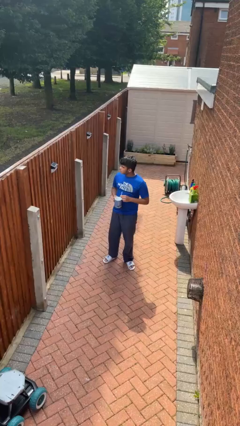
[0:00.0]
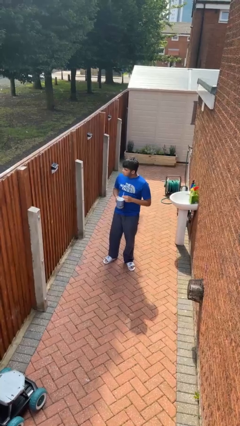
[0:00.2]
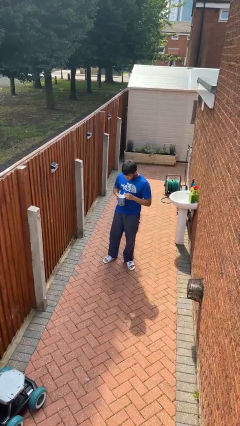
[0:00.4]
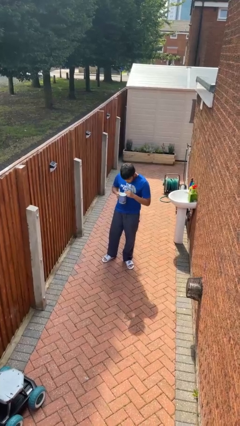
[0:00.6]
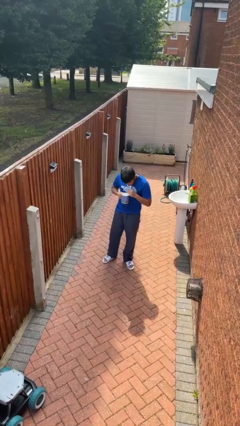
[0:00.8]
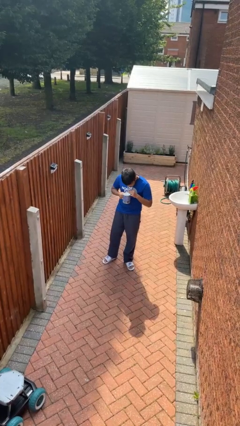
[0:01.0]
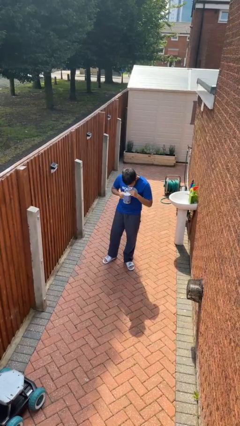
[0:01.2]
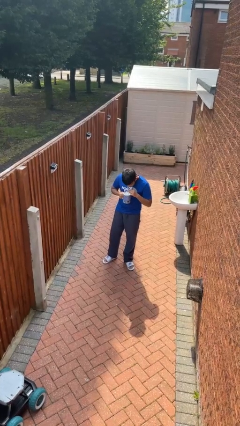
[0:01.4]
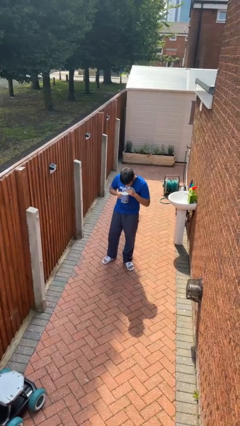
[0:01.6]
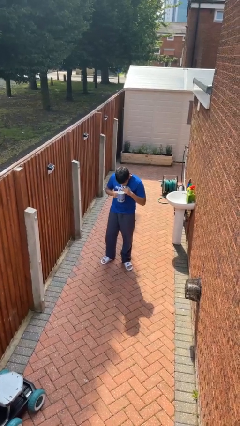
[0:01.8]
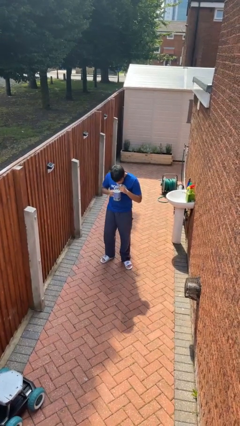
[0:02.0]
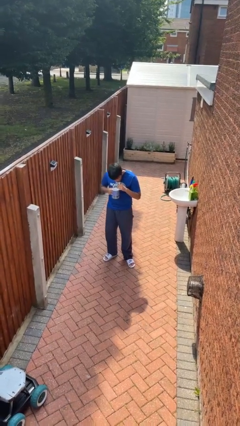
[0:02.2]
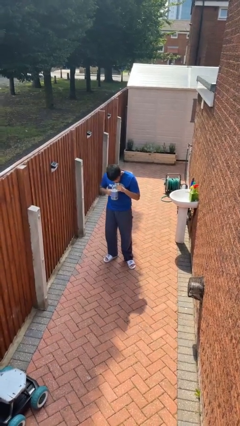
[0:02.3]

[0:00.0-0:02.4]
person drinks from straw

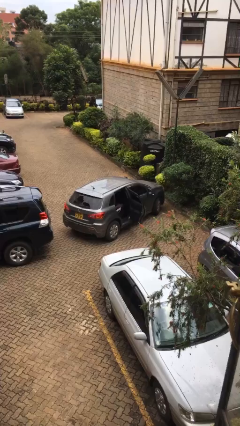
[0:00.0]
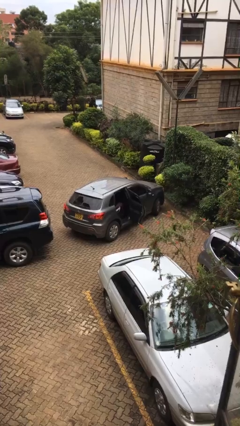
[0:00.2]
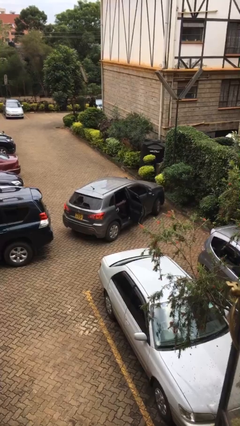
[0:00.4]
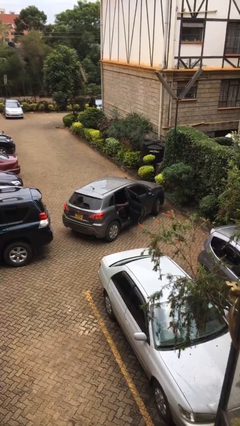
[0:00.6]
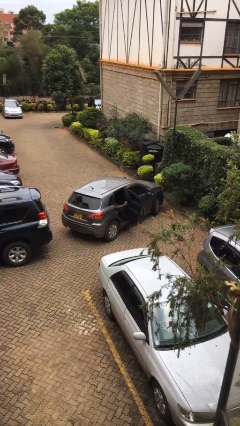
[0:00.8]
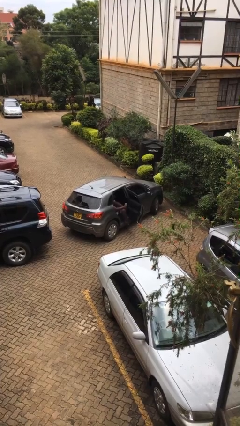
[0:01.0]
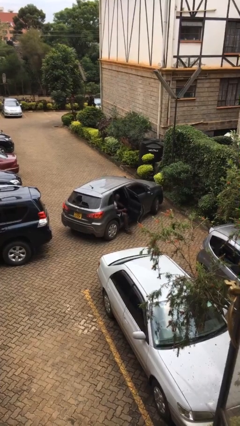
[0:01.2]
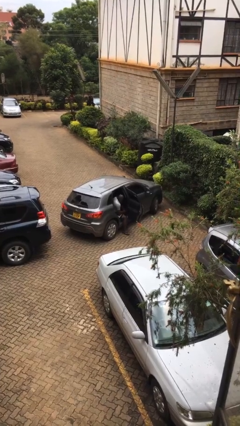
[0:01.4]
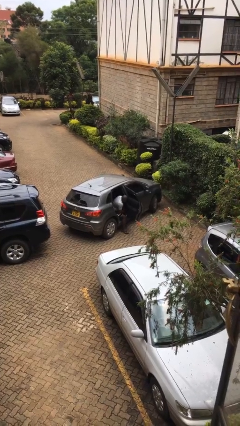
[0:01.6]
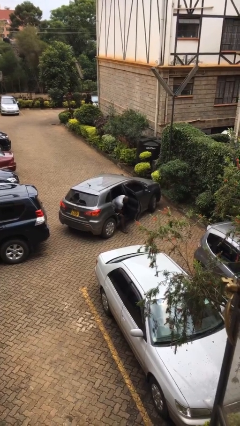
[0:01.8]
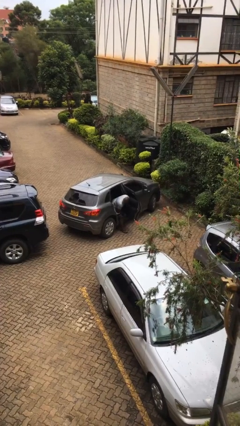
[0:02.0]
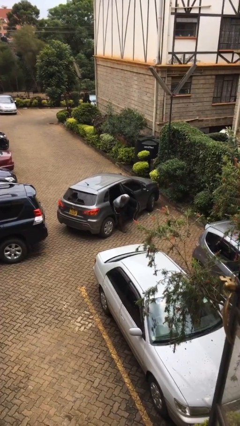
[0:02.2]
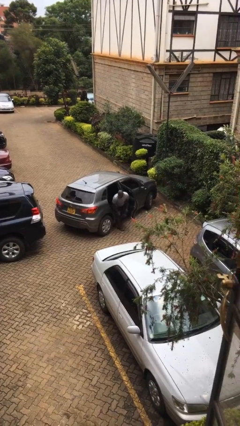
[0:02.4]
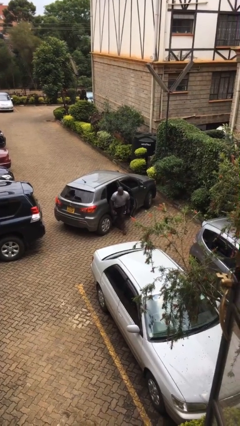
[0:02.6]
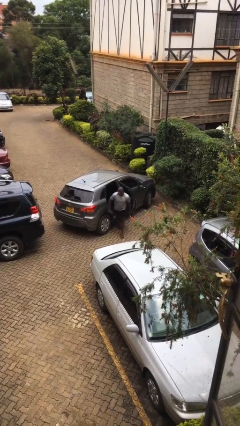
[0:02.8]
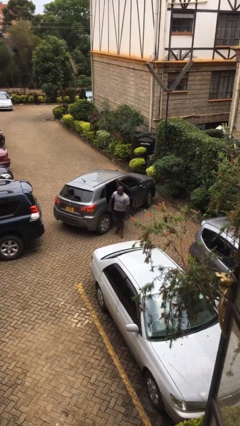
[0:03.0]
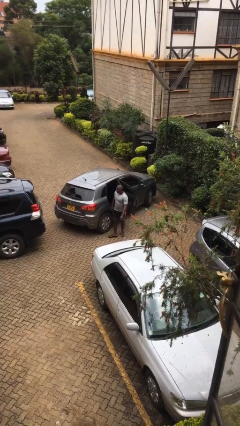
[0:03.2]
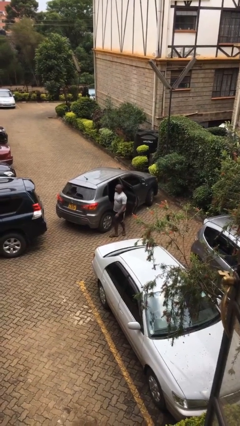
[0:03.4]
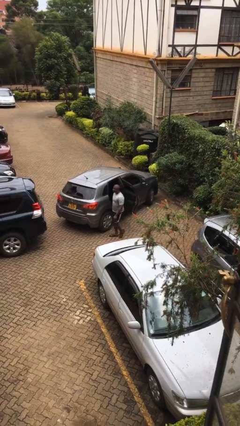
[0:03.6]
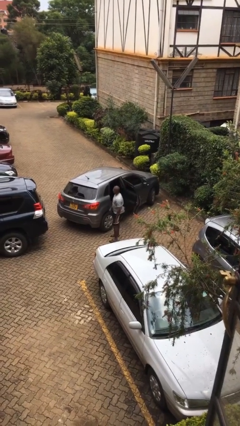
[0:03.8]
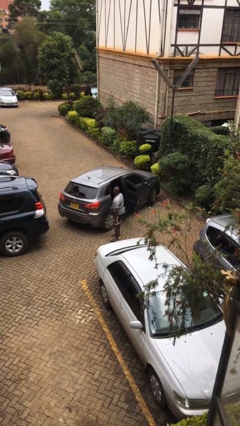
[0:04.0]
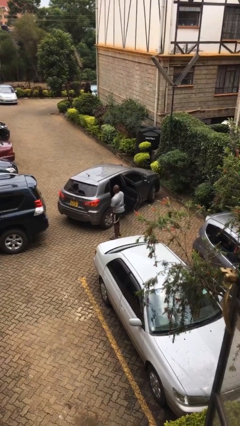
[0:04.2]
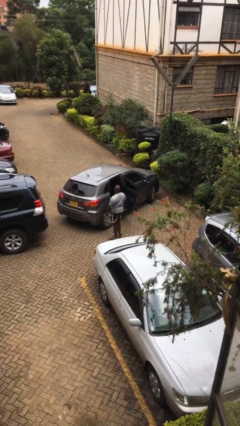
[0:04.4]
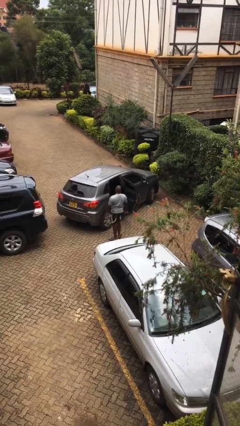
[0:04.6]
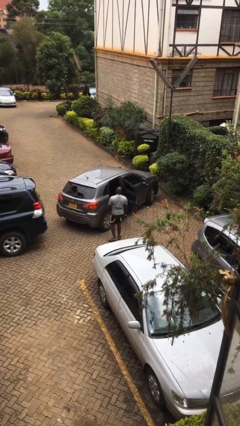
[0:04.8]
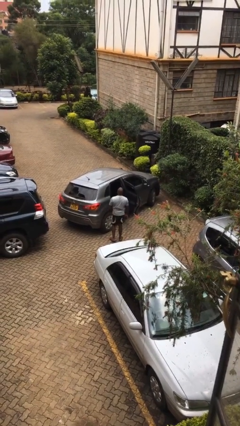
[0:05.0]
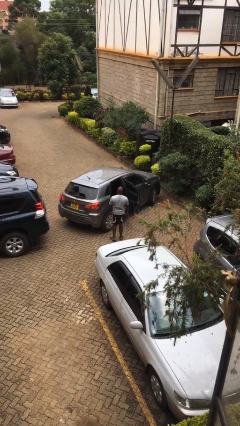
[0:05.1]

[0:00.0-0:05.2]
person exits car

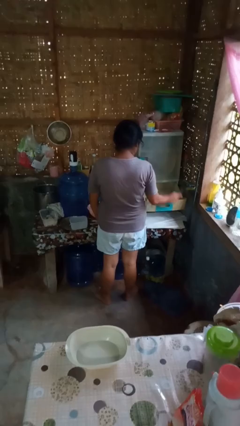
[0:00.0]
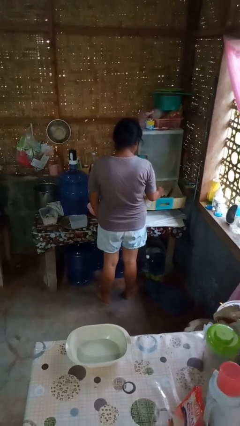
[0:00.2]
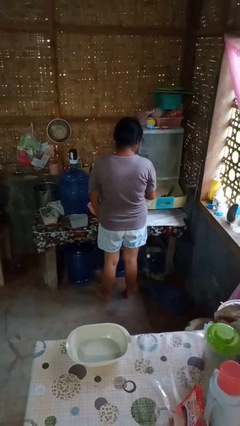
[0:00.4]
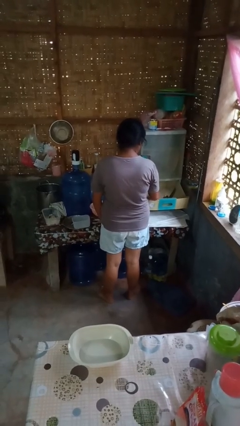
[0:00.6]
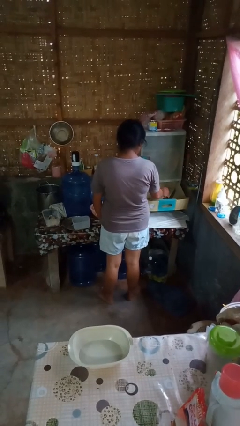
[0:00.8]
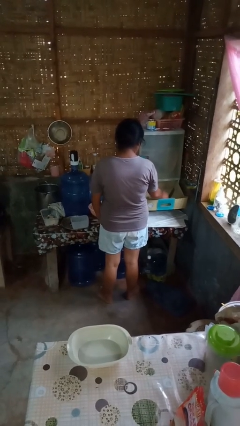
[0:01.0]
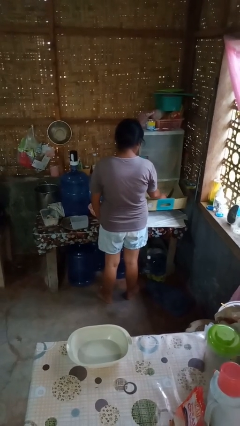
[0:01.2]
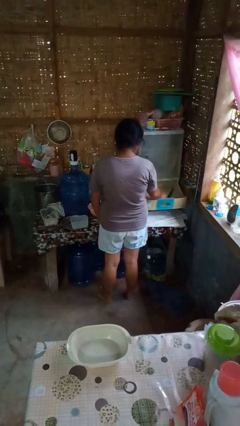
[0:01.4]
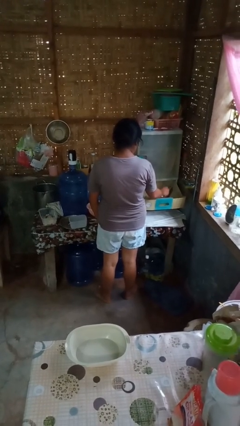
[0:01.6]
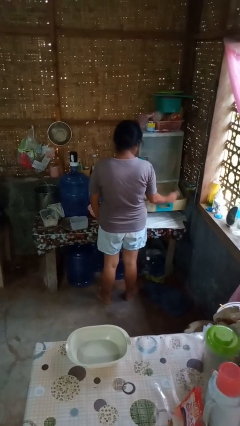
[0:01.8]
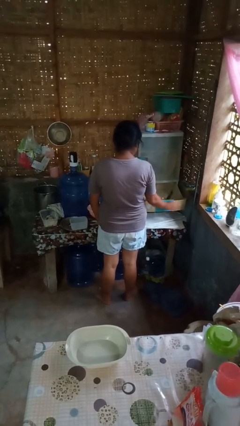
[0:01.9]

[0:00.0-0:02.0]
person puts object into kitchen drawer

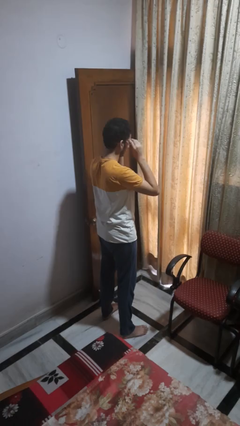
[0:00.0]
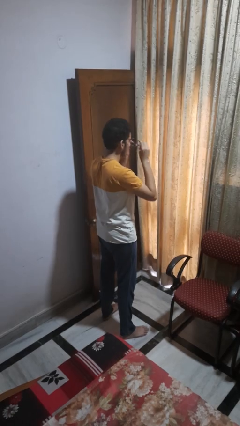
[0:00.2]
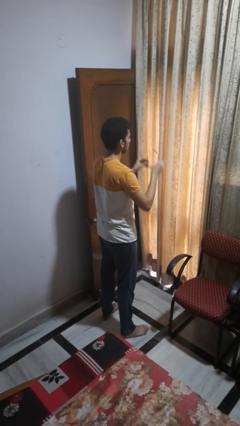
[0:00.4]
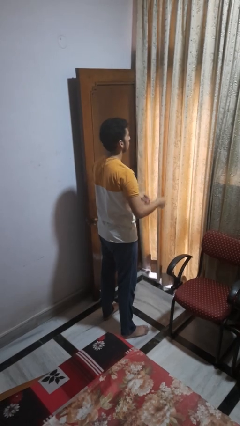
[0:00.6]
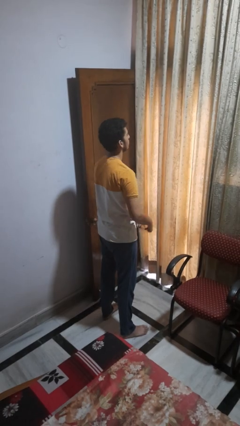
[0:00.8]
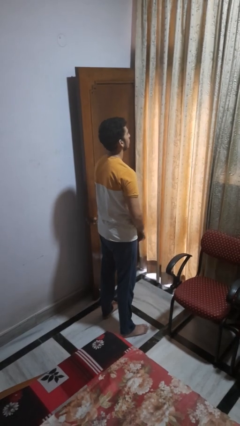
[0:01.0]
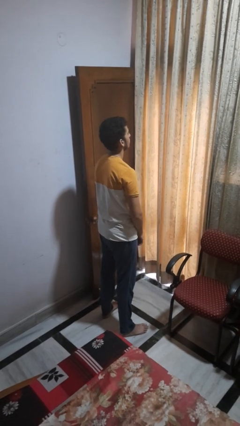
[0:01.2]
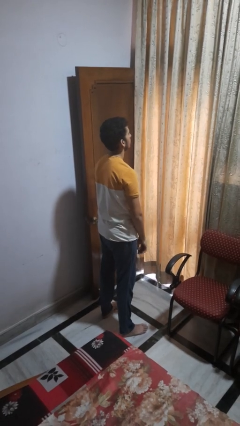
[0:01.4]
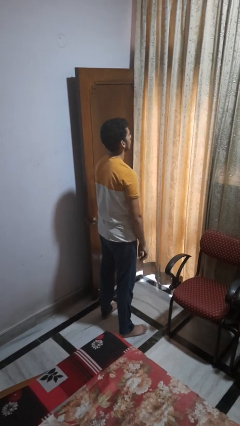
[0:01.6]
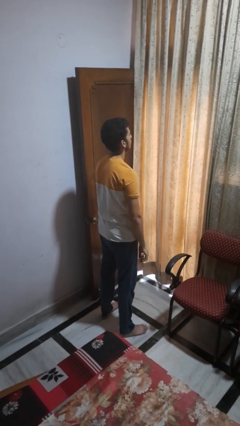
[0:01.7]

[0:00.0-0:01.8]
person takes off glasses

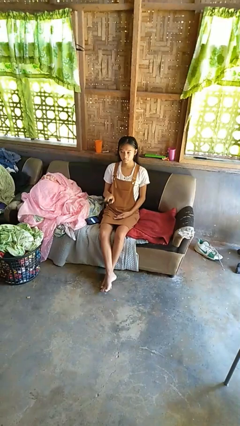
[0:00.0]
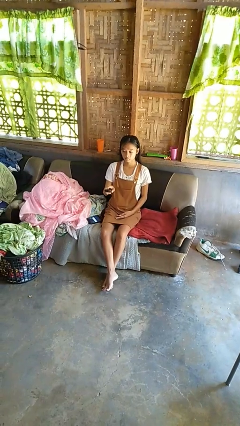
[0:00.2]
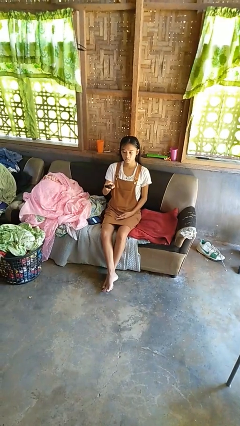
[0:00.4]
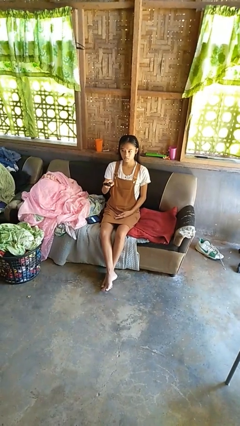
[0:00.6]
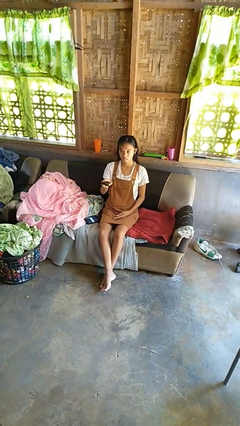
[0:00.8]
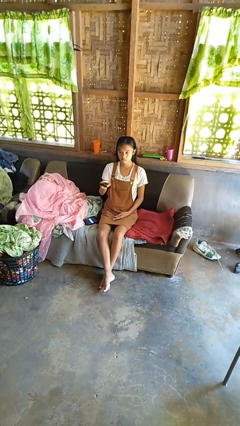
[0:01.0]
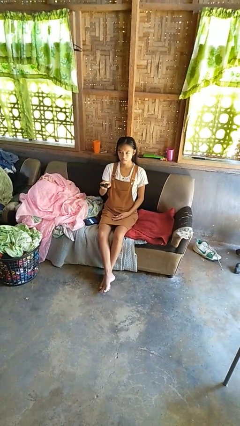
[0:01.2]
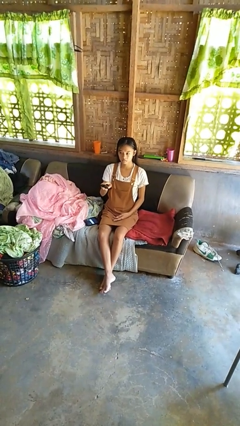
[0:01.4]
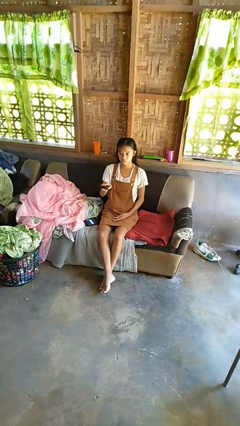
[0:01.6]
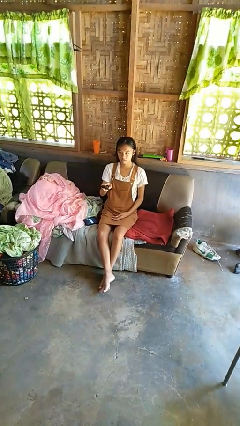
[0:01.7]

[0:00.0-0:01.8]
person uses television remote

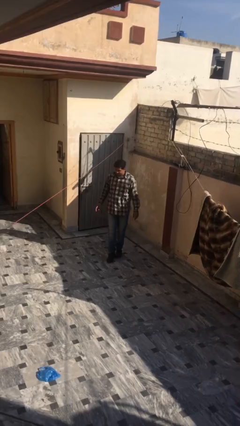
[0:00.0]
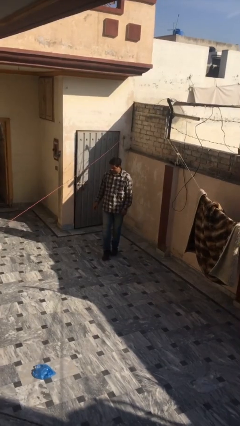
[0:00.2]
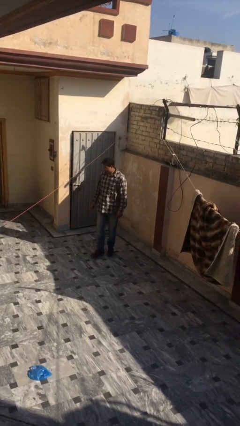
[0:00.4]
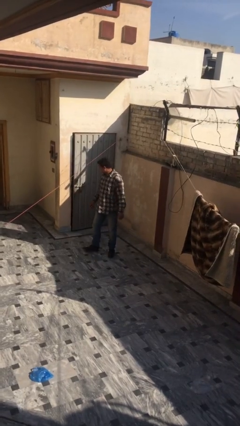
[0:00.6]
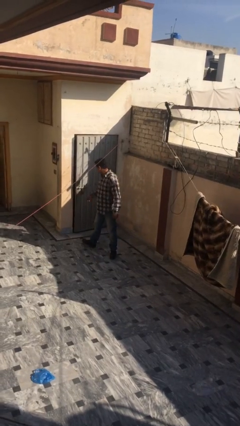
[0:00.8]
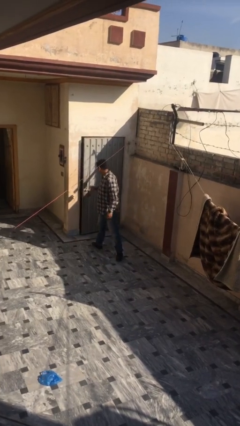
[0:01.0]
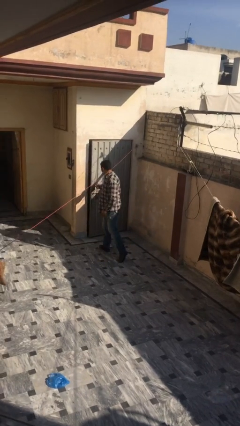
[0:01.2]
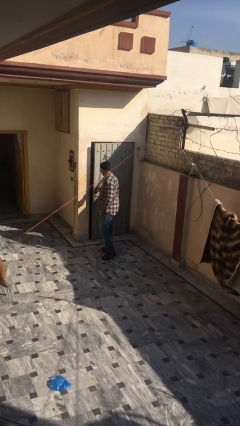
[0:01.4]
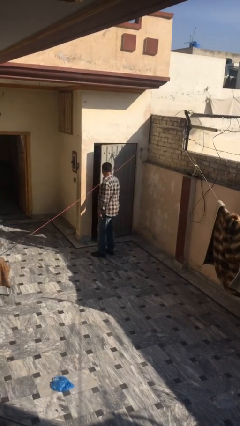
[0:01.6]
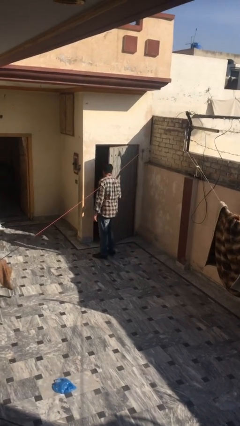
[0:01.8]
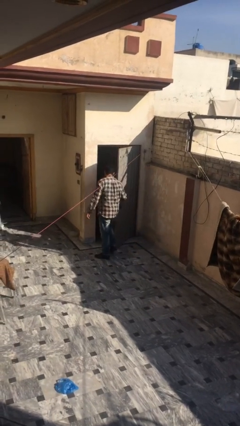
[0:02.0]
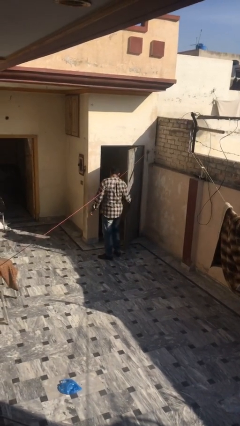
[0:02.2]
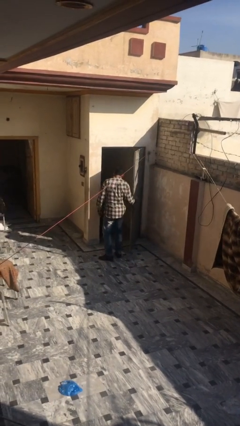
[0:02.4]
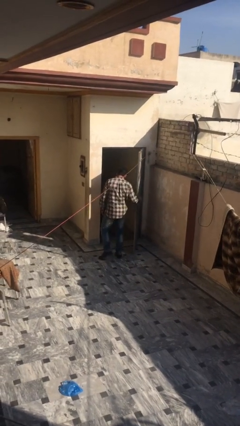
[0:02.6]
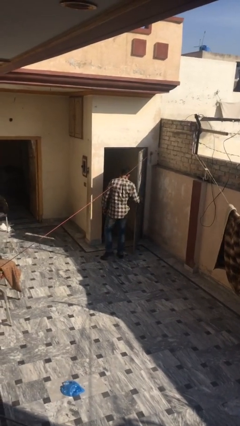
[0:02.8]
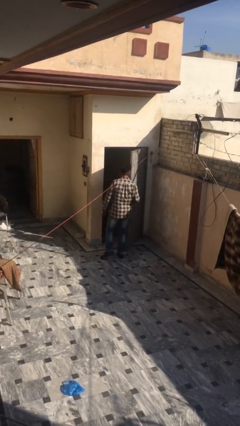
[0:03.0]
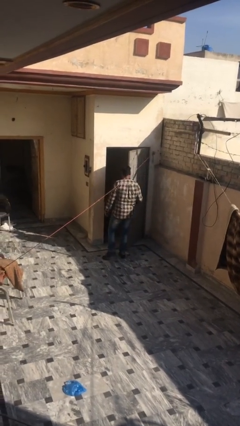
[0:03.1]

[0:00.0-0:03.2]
person opens facility door

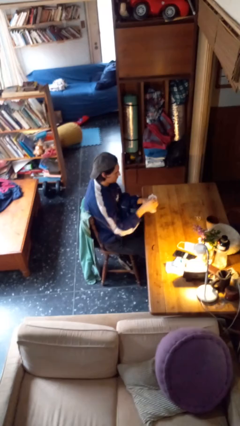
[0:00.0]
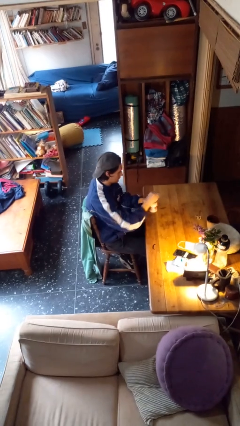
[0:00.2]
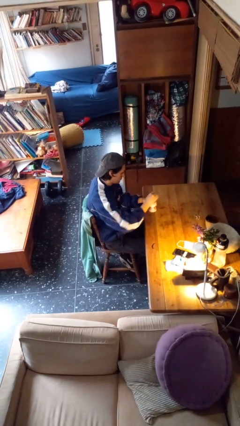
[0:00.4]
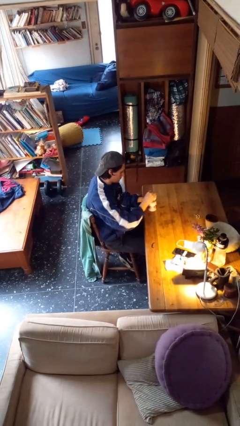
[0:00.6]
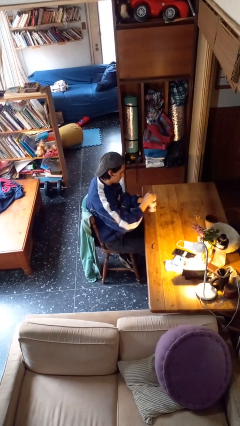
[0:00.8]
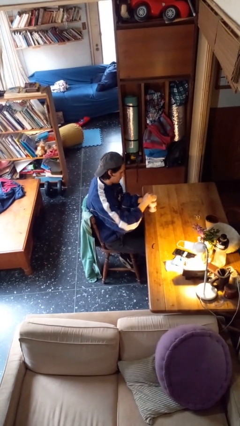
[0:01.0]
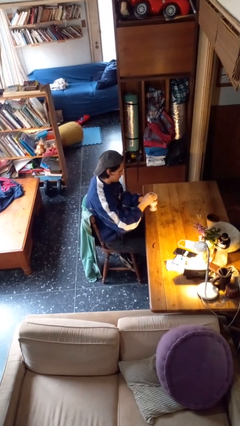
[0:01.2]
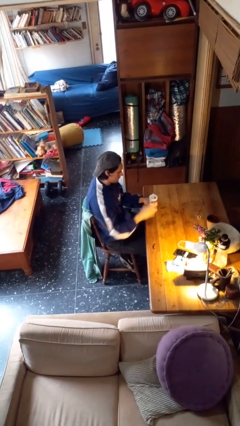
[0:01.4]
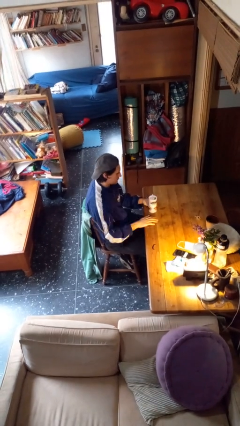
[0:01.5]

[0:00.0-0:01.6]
person stirs mug
